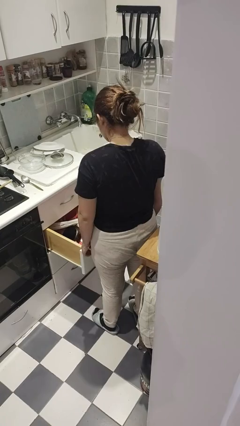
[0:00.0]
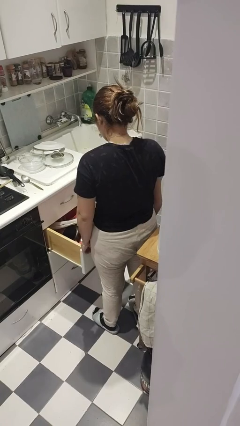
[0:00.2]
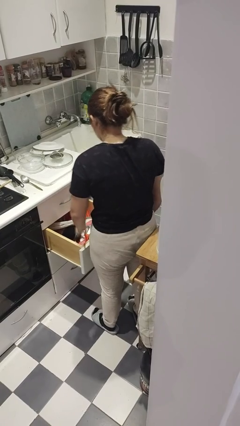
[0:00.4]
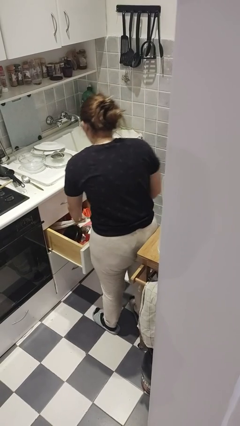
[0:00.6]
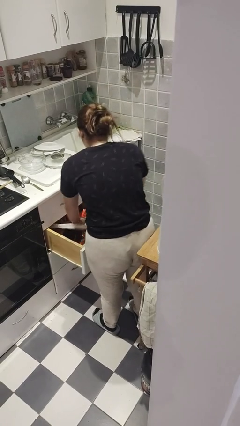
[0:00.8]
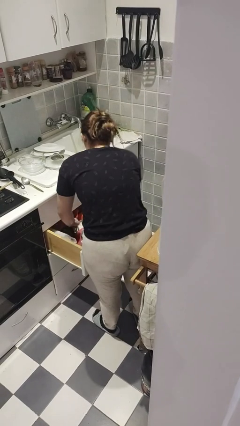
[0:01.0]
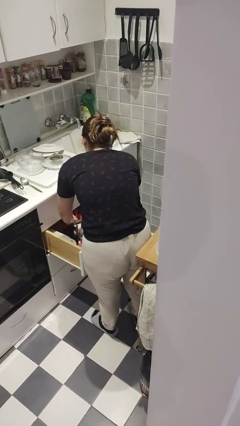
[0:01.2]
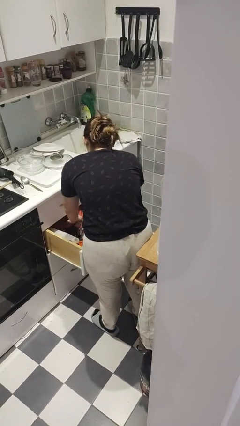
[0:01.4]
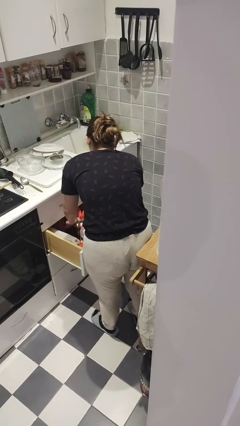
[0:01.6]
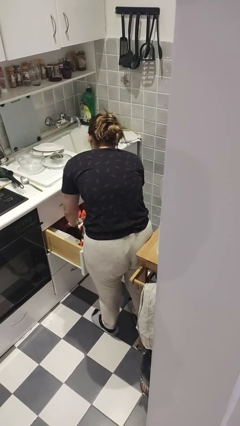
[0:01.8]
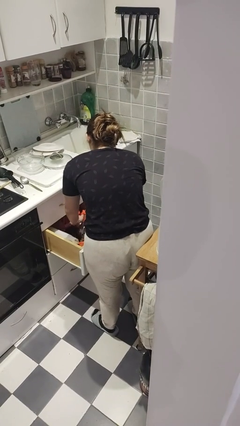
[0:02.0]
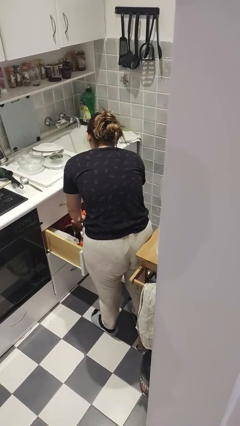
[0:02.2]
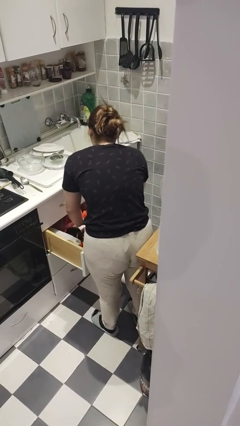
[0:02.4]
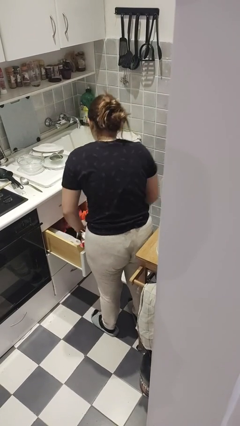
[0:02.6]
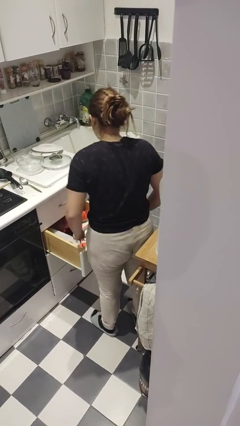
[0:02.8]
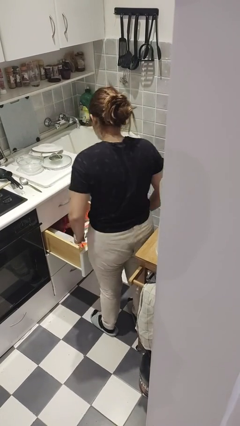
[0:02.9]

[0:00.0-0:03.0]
person searches in kitchen drawer

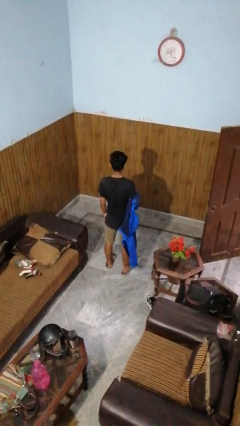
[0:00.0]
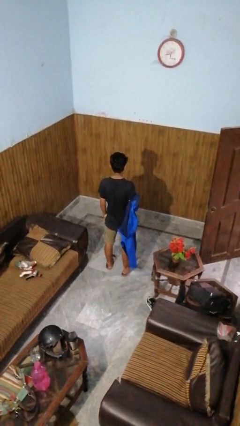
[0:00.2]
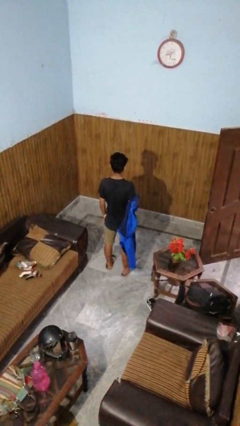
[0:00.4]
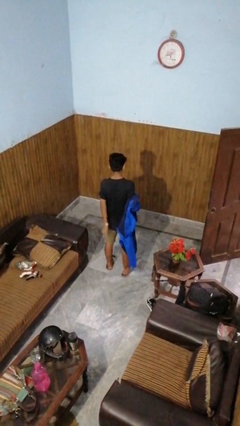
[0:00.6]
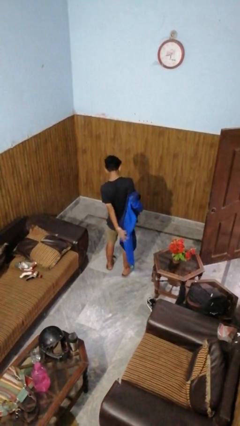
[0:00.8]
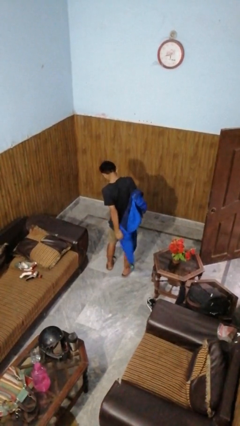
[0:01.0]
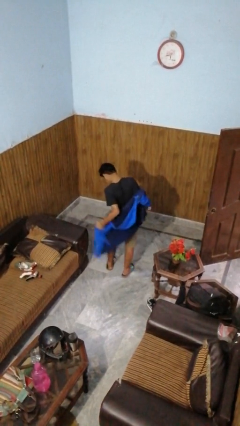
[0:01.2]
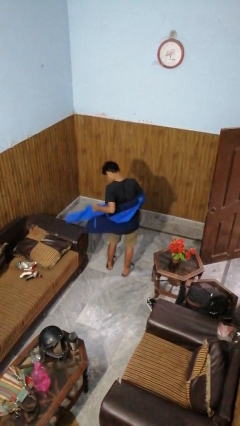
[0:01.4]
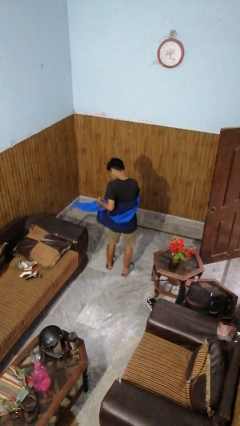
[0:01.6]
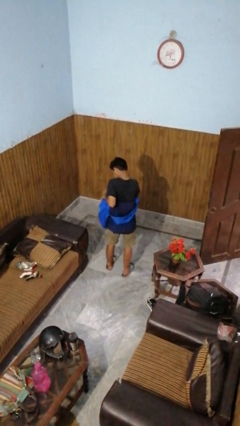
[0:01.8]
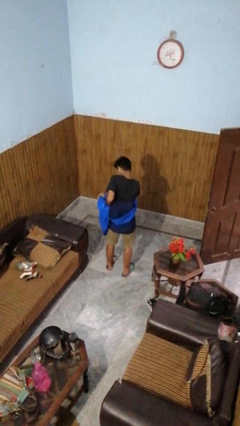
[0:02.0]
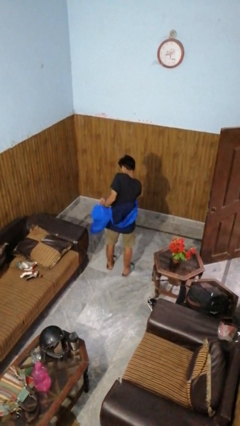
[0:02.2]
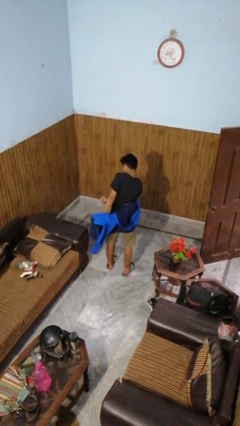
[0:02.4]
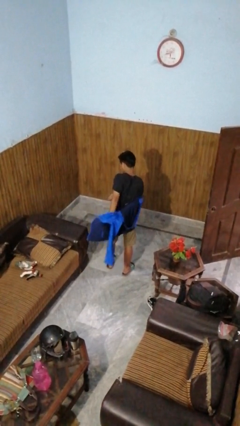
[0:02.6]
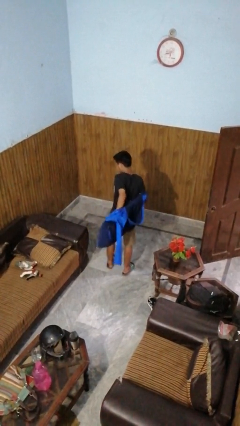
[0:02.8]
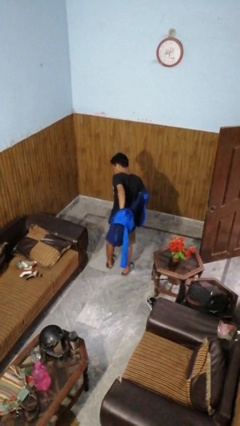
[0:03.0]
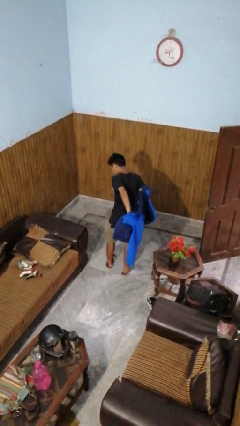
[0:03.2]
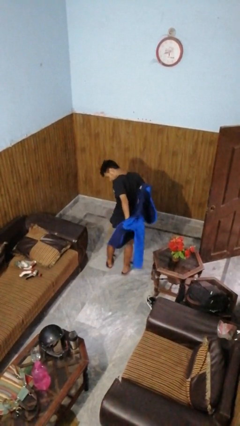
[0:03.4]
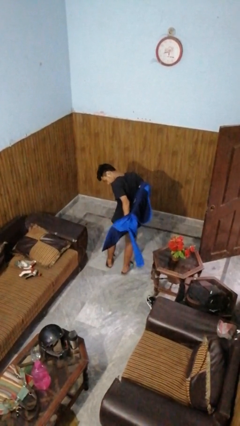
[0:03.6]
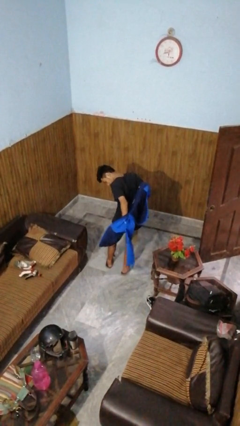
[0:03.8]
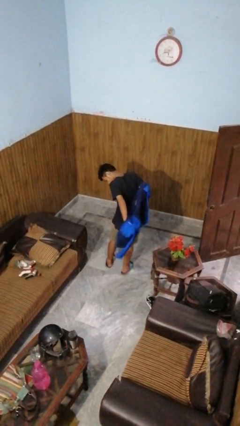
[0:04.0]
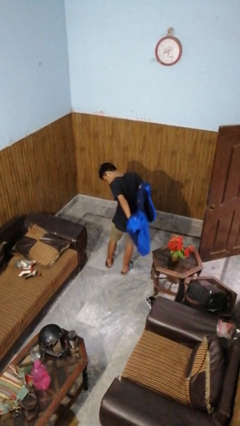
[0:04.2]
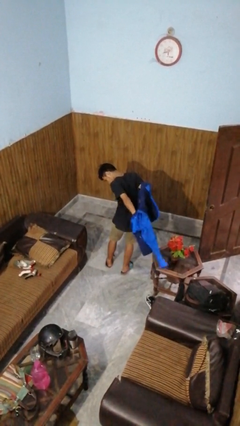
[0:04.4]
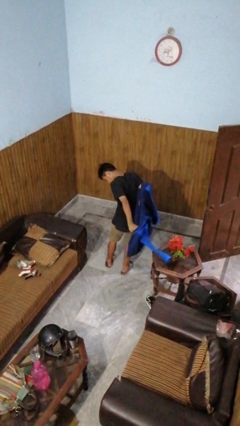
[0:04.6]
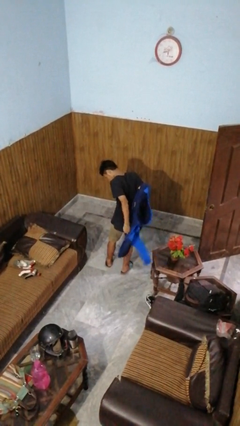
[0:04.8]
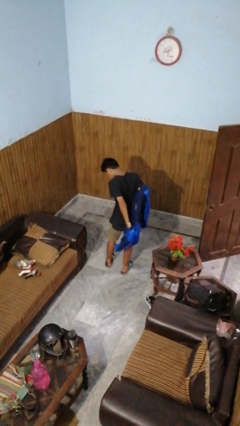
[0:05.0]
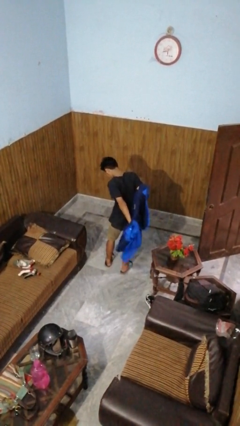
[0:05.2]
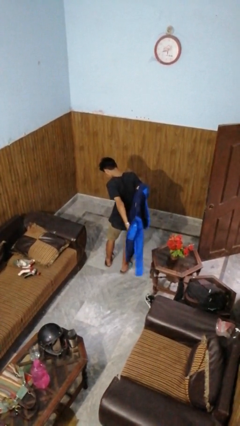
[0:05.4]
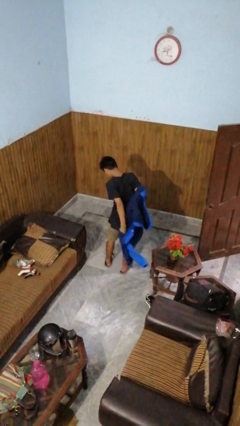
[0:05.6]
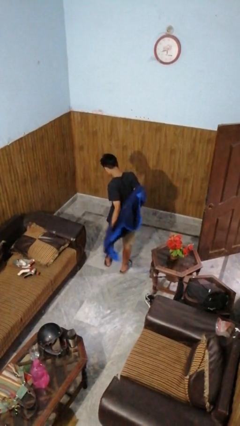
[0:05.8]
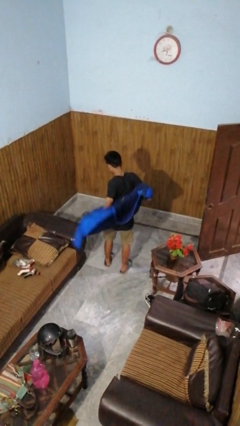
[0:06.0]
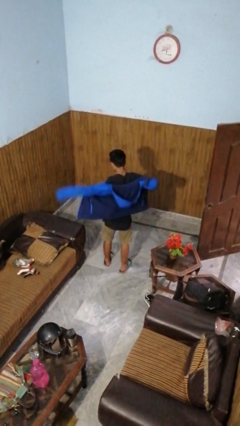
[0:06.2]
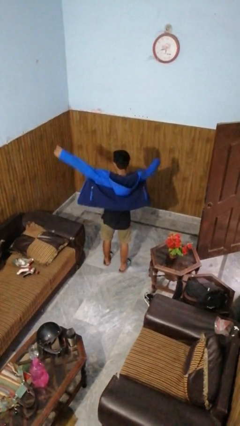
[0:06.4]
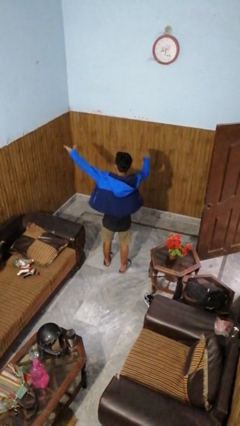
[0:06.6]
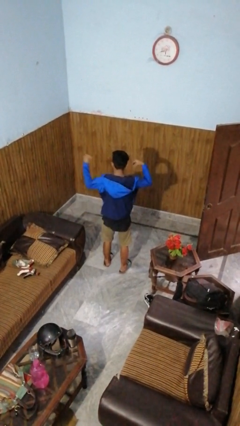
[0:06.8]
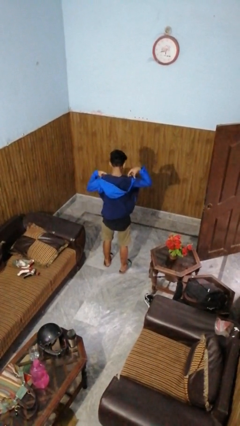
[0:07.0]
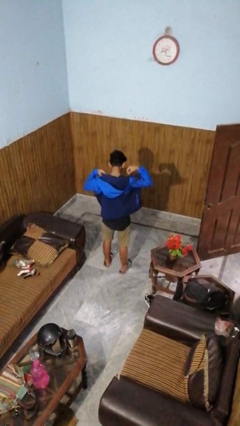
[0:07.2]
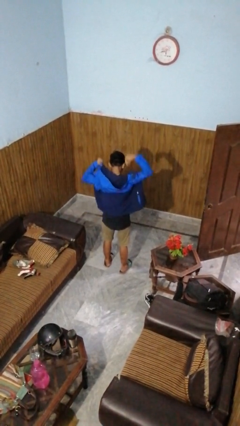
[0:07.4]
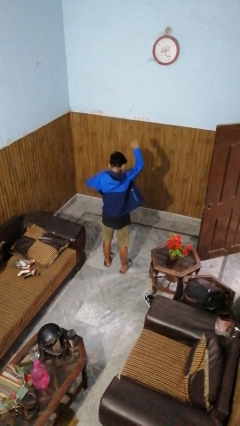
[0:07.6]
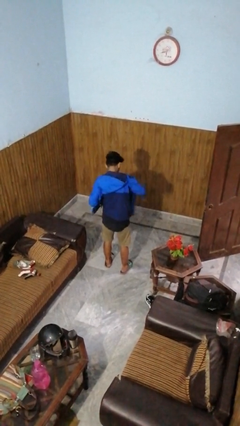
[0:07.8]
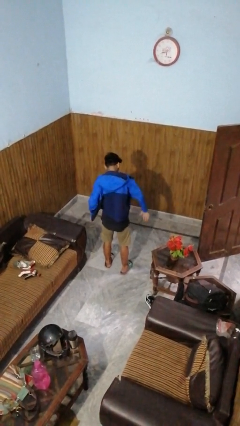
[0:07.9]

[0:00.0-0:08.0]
person puts on jacket

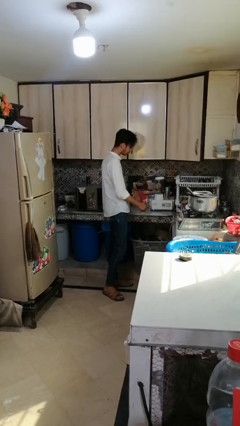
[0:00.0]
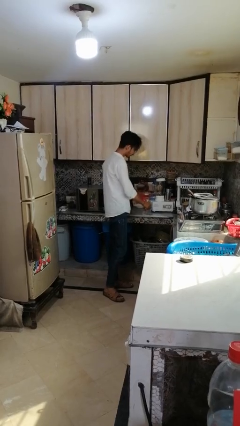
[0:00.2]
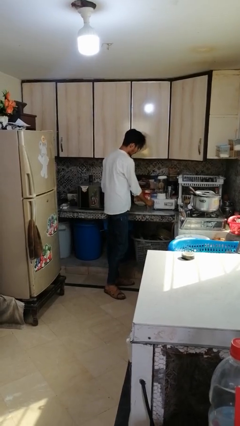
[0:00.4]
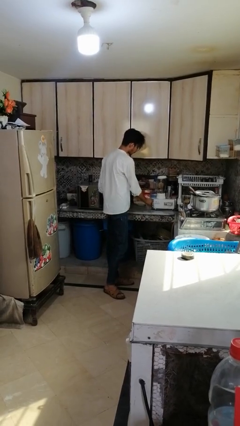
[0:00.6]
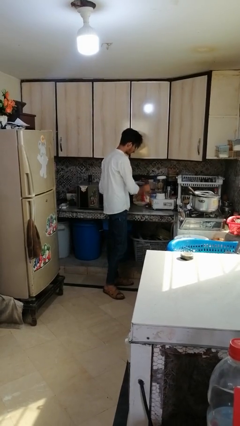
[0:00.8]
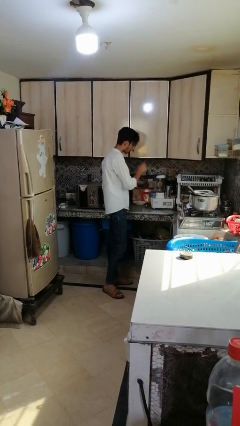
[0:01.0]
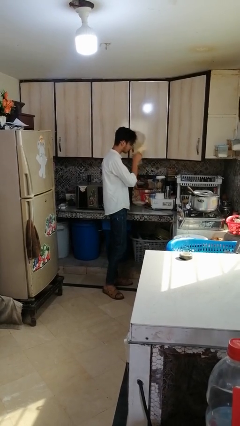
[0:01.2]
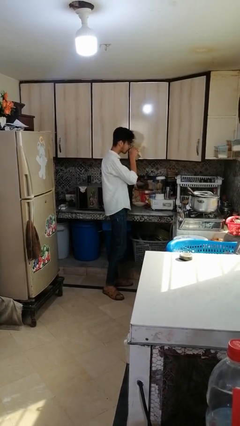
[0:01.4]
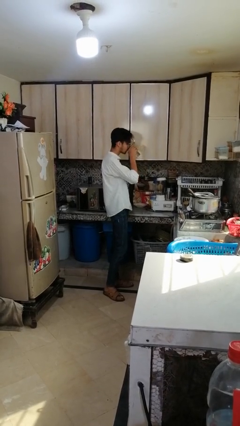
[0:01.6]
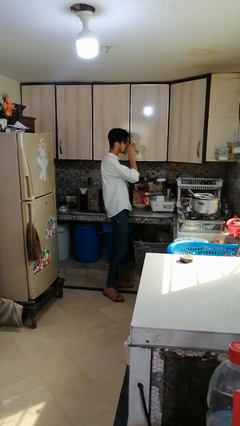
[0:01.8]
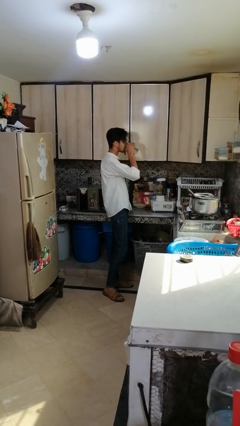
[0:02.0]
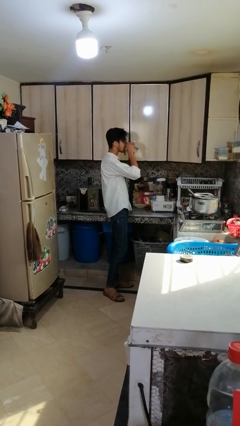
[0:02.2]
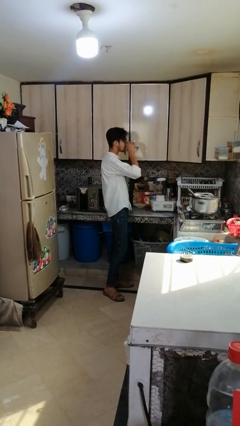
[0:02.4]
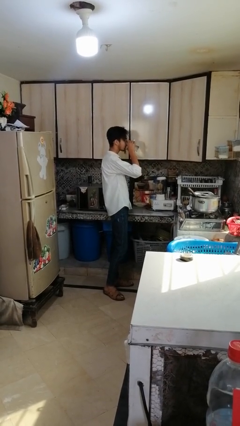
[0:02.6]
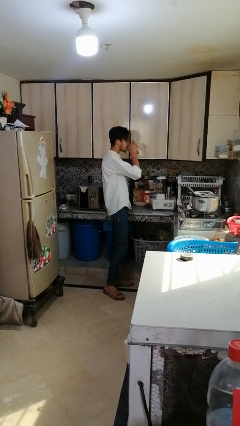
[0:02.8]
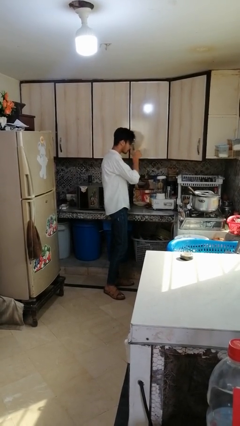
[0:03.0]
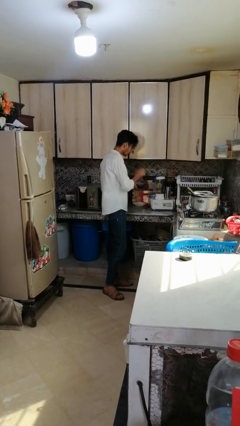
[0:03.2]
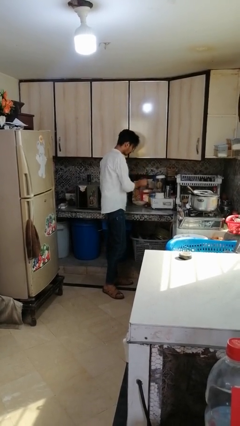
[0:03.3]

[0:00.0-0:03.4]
person drinks from cup

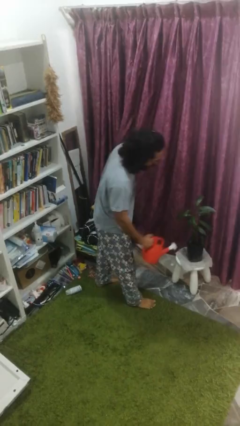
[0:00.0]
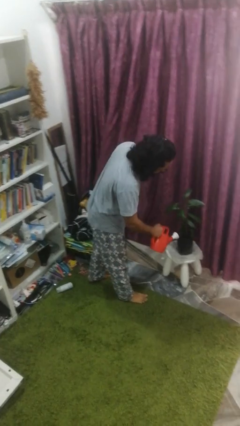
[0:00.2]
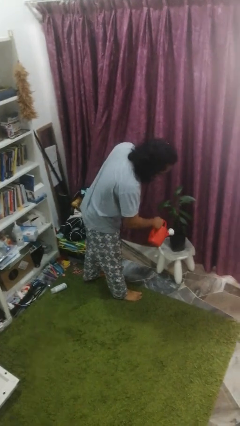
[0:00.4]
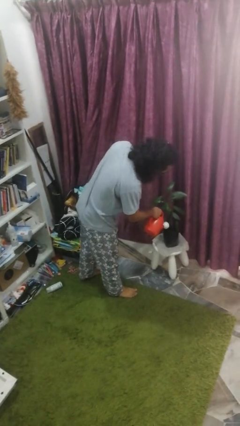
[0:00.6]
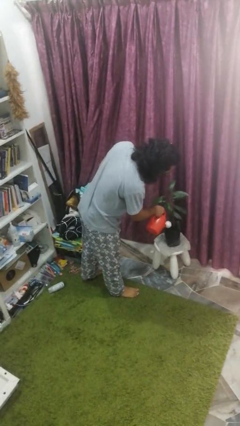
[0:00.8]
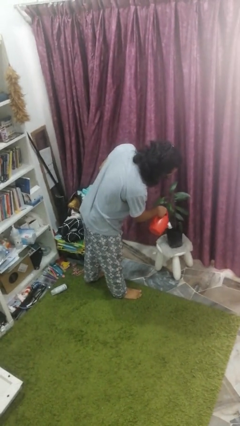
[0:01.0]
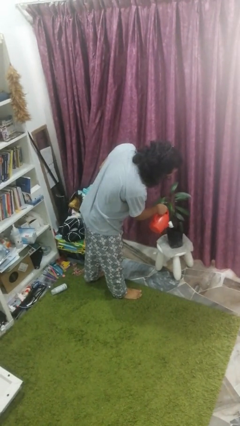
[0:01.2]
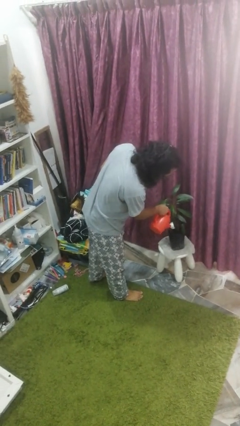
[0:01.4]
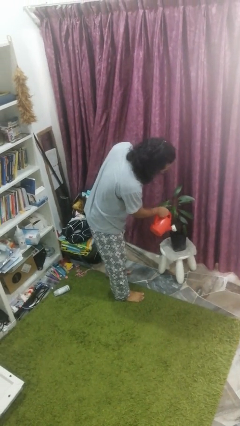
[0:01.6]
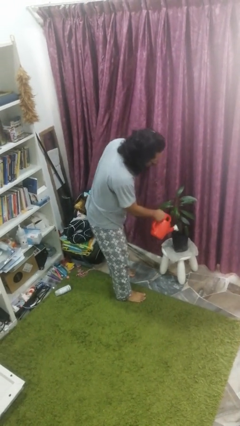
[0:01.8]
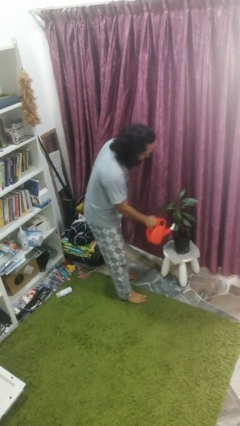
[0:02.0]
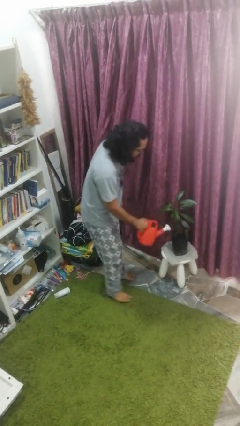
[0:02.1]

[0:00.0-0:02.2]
person waters houseplant

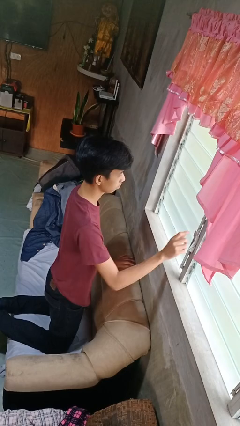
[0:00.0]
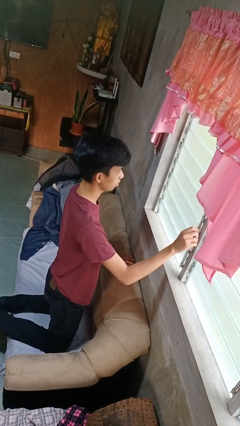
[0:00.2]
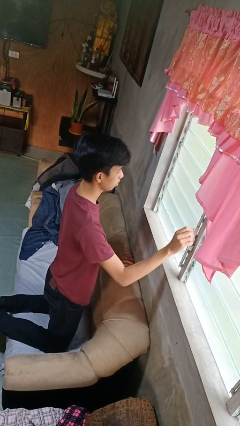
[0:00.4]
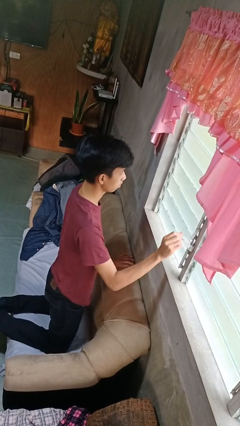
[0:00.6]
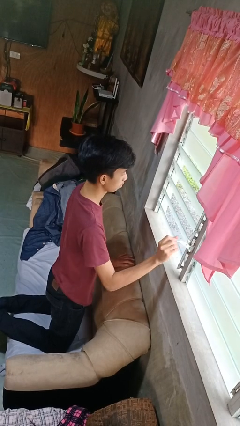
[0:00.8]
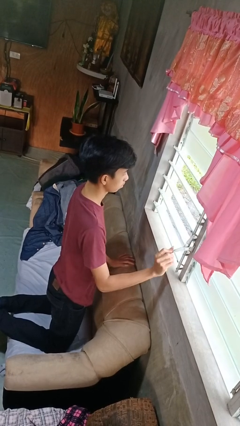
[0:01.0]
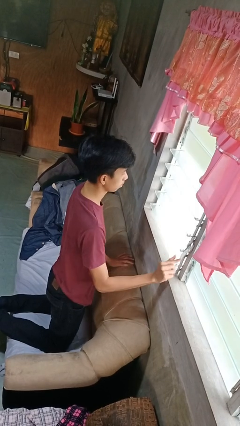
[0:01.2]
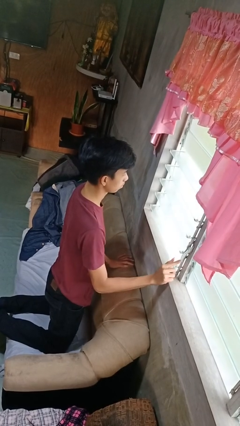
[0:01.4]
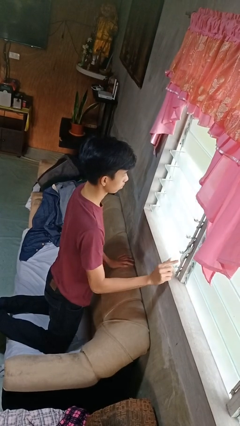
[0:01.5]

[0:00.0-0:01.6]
person opens home window
